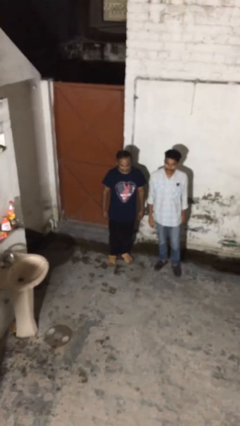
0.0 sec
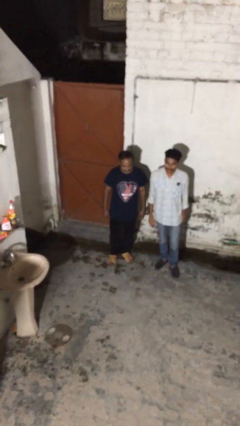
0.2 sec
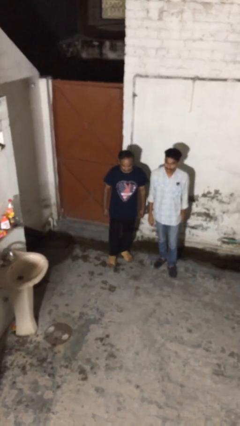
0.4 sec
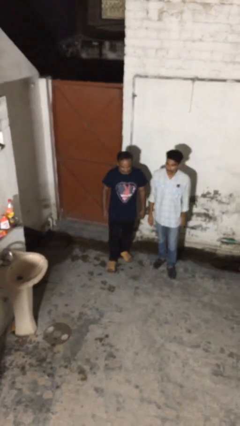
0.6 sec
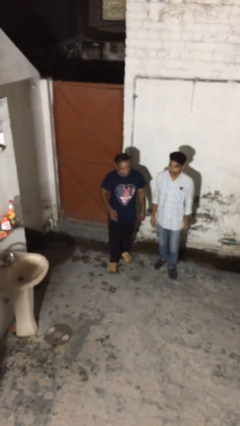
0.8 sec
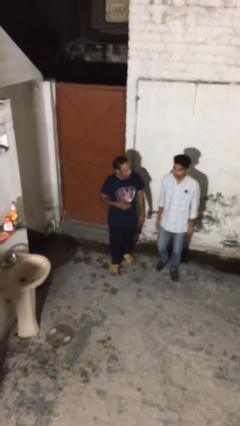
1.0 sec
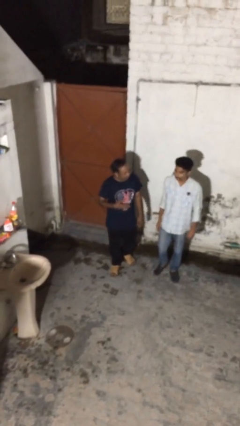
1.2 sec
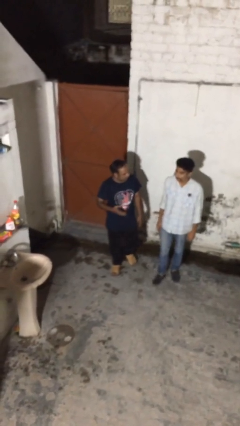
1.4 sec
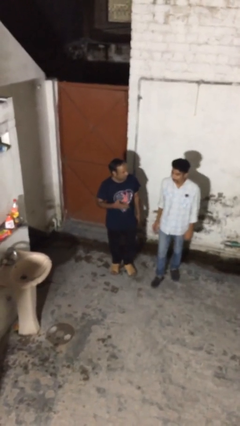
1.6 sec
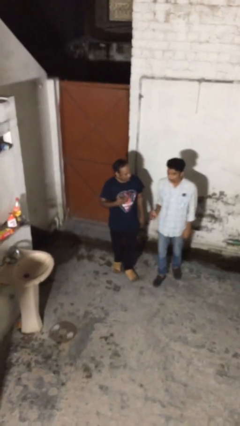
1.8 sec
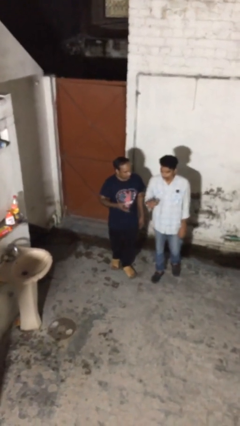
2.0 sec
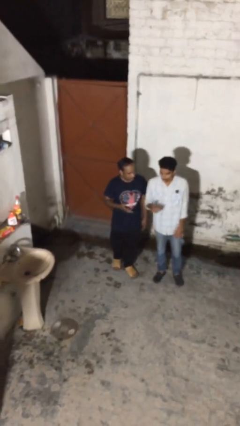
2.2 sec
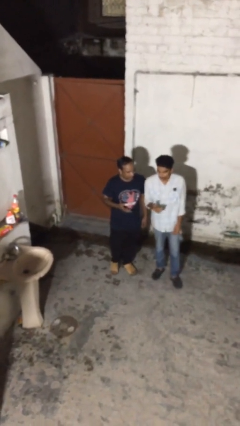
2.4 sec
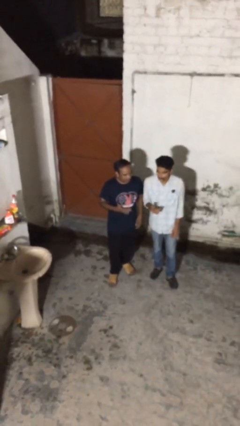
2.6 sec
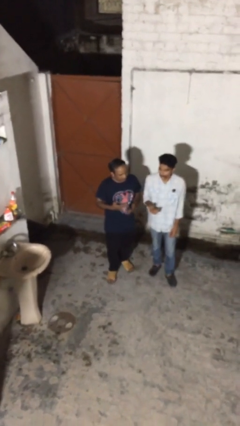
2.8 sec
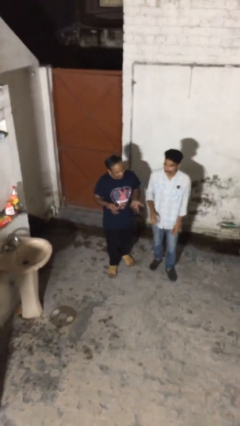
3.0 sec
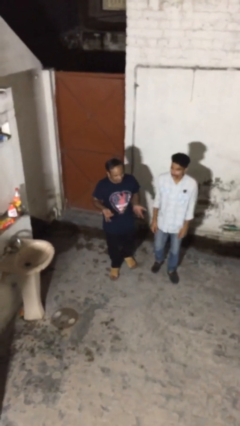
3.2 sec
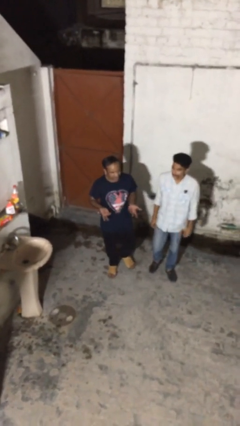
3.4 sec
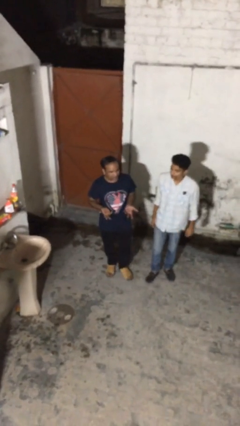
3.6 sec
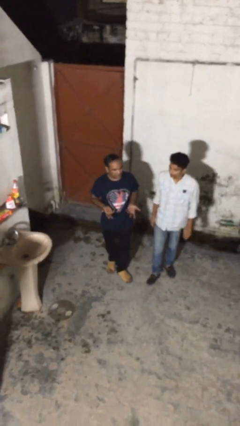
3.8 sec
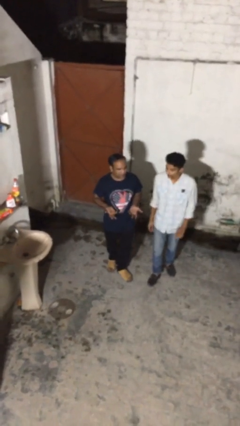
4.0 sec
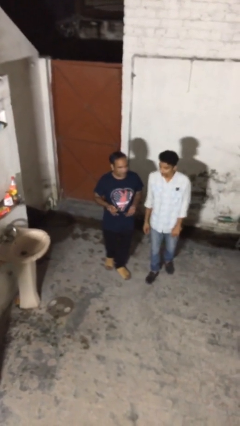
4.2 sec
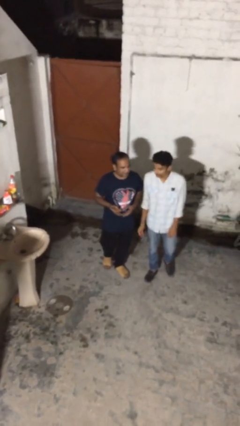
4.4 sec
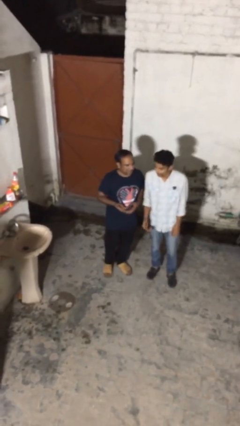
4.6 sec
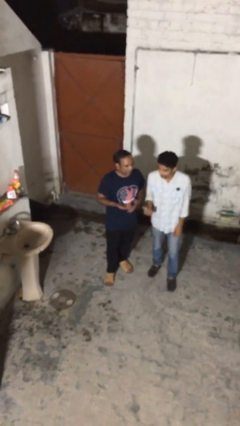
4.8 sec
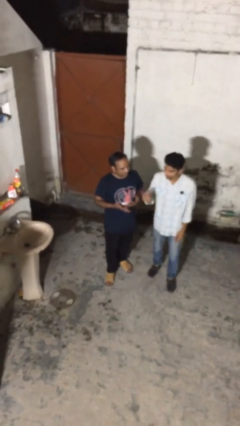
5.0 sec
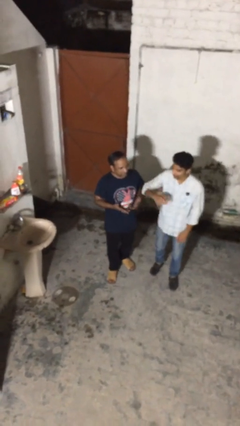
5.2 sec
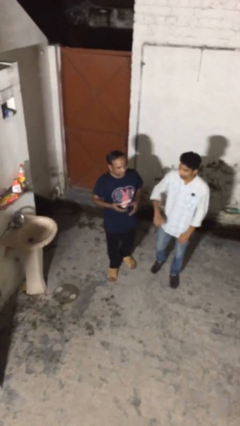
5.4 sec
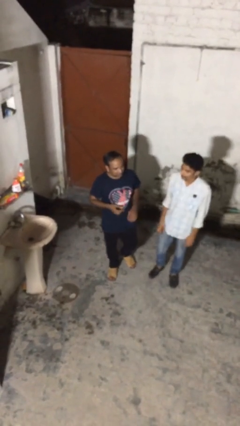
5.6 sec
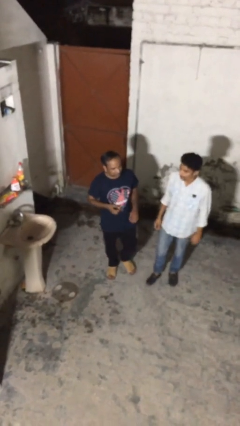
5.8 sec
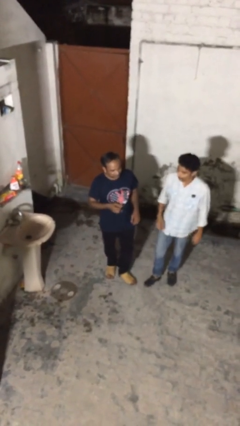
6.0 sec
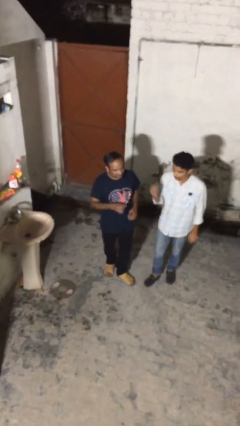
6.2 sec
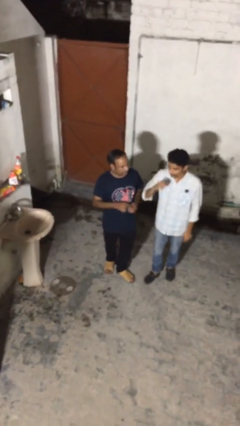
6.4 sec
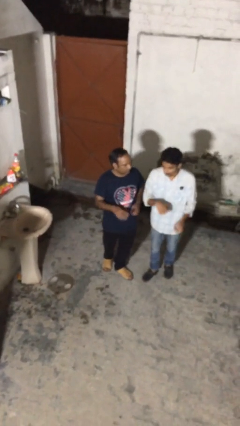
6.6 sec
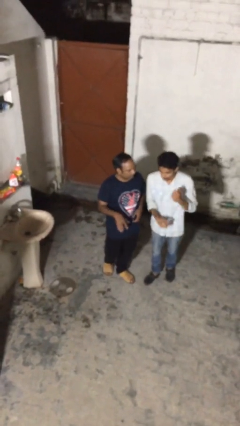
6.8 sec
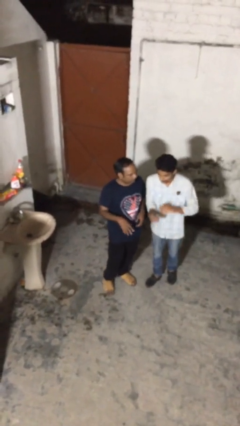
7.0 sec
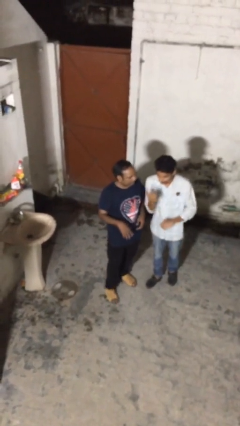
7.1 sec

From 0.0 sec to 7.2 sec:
person talks to person

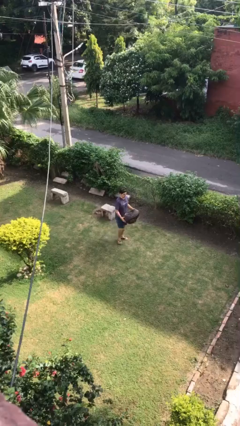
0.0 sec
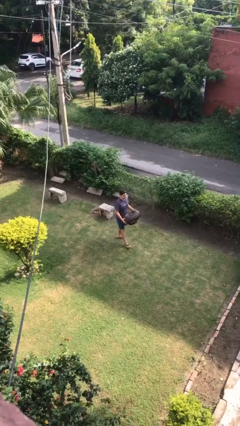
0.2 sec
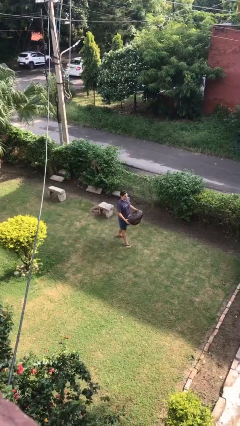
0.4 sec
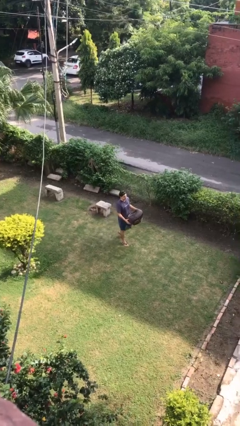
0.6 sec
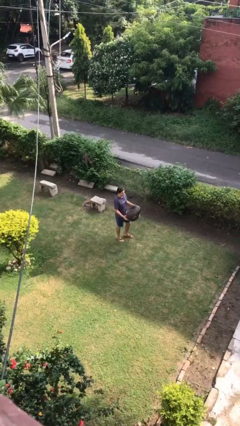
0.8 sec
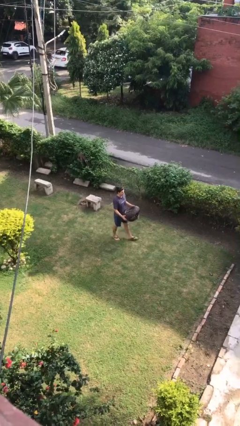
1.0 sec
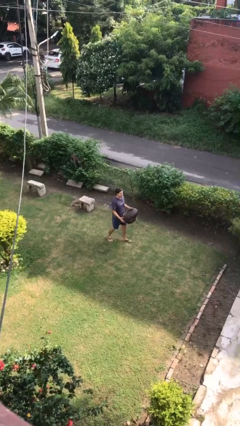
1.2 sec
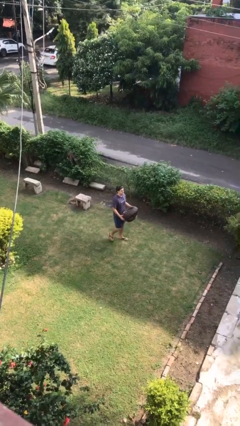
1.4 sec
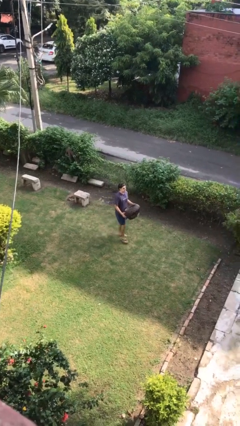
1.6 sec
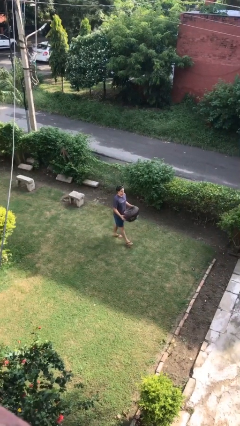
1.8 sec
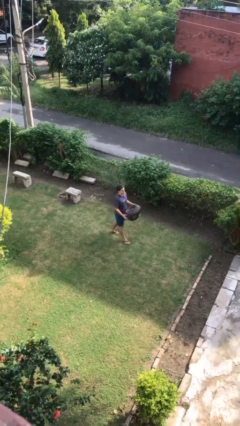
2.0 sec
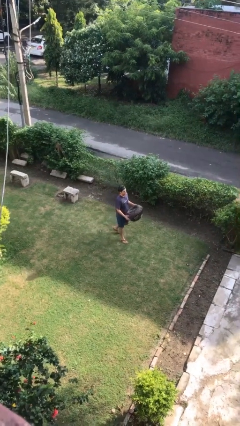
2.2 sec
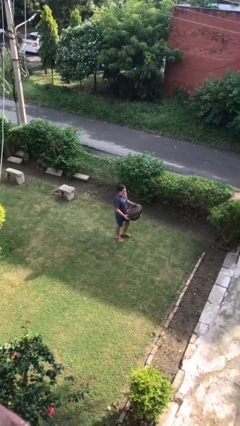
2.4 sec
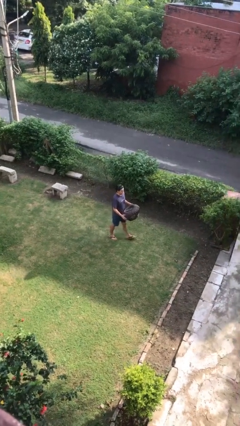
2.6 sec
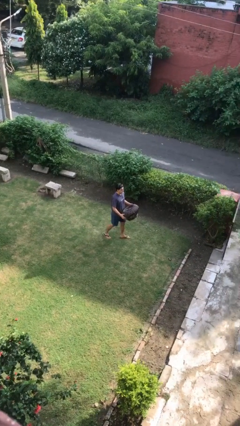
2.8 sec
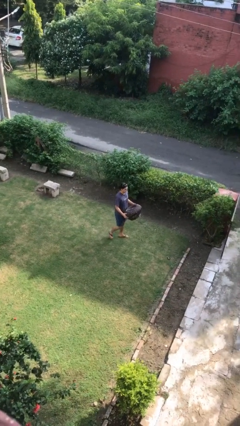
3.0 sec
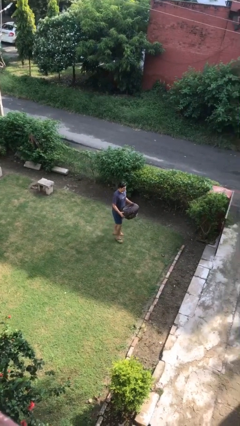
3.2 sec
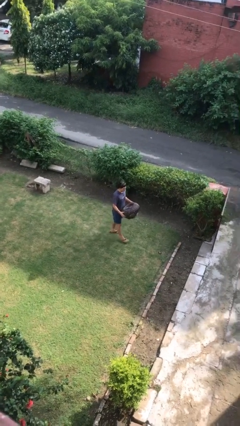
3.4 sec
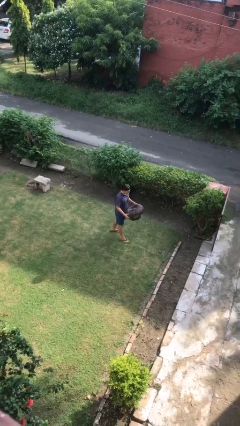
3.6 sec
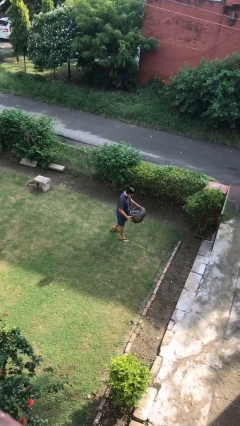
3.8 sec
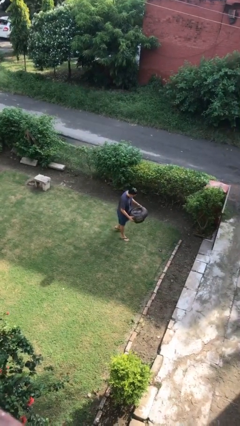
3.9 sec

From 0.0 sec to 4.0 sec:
person carries heavy object

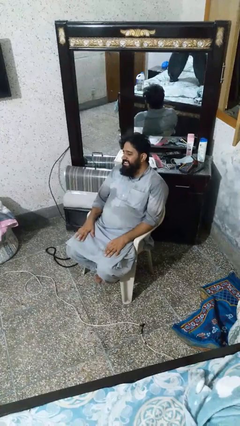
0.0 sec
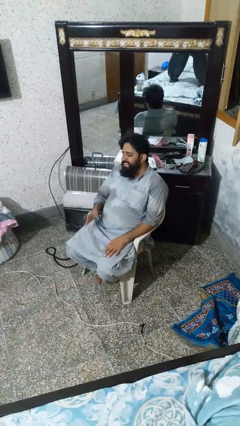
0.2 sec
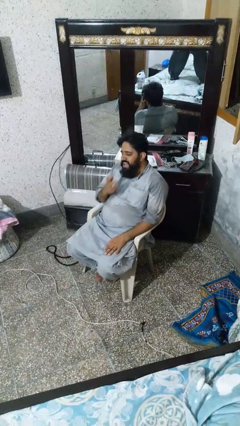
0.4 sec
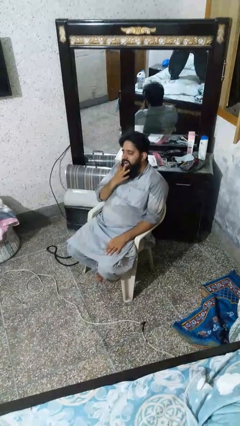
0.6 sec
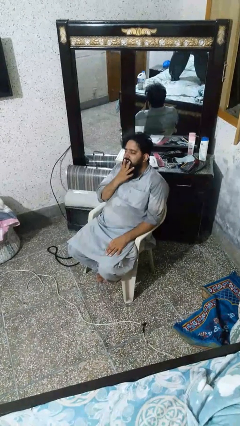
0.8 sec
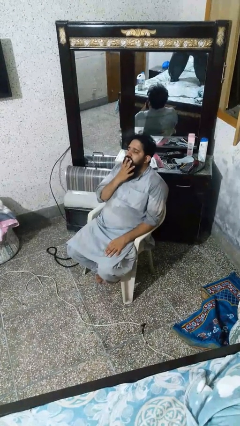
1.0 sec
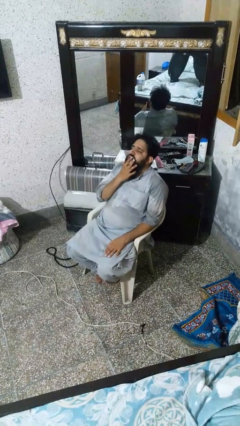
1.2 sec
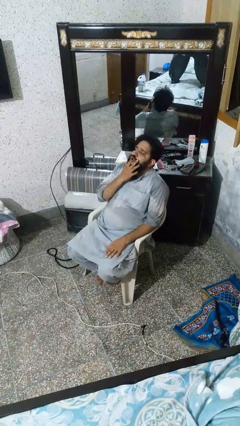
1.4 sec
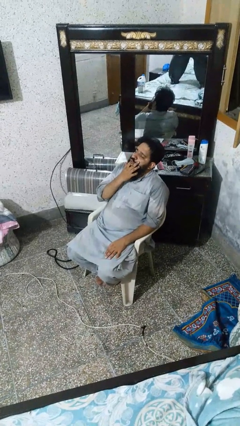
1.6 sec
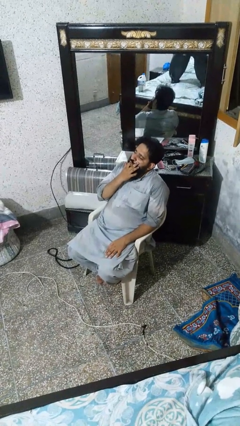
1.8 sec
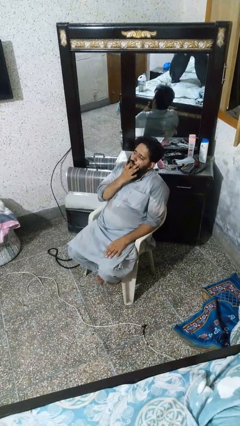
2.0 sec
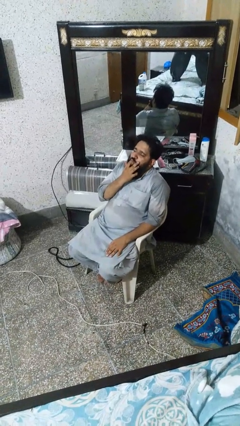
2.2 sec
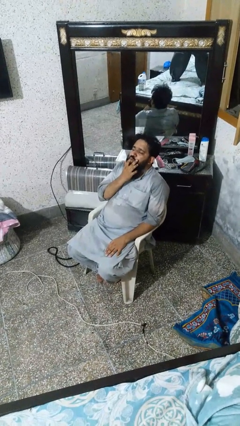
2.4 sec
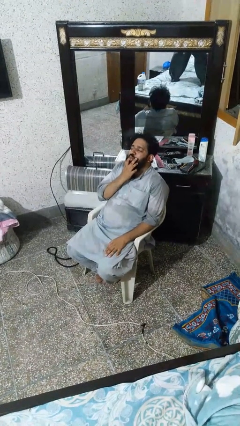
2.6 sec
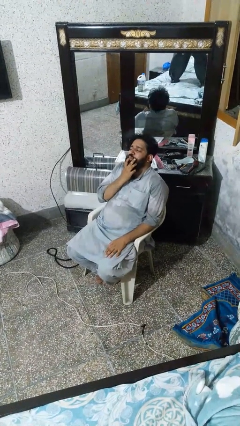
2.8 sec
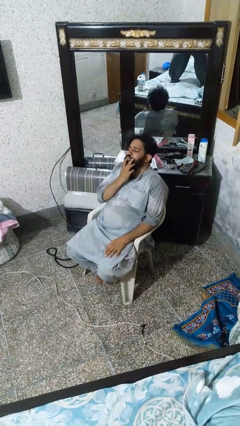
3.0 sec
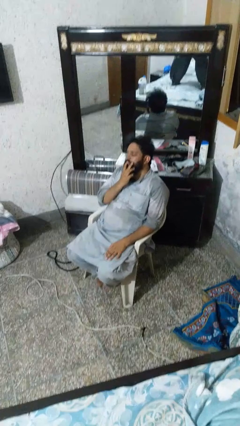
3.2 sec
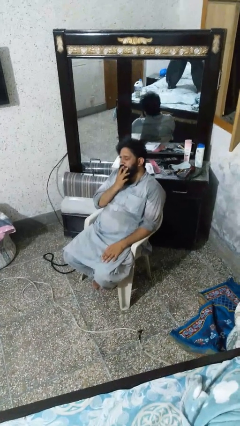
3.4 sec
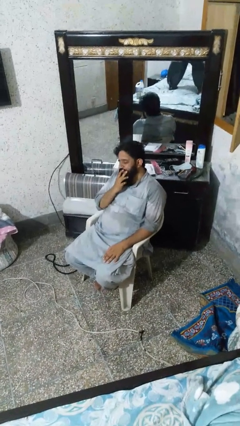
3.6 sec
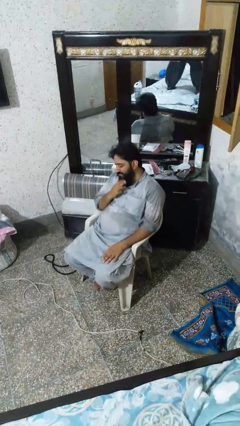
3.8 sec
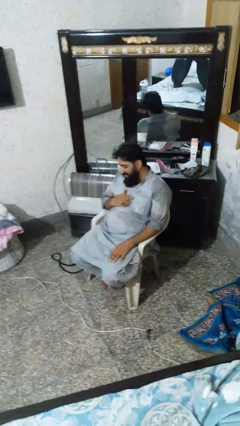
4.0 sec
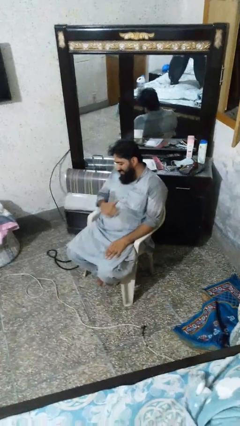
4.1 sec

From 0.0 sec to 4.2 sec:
person licks fingers

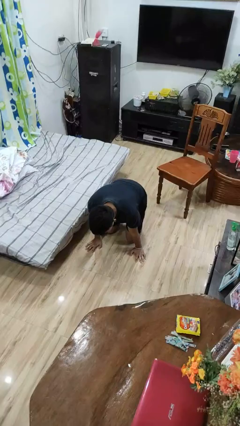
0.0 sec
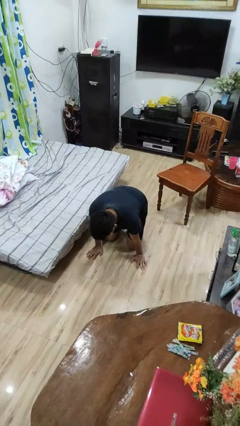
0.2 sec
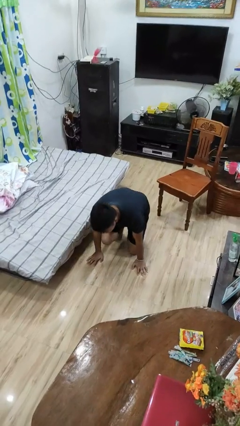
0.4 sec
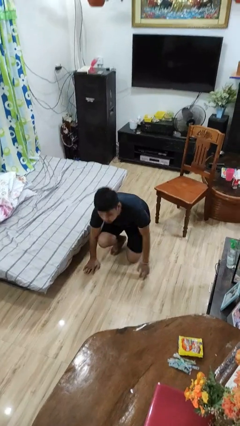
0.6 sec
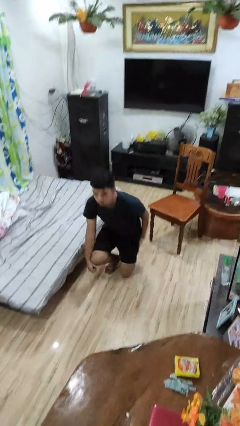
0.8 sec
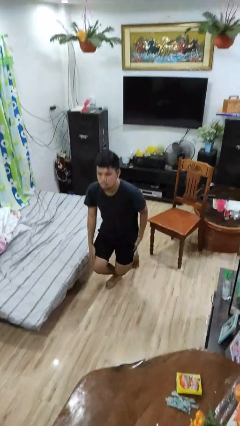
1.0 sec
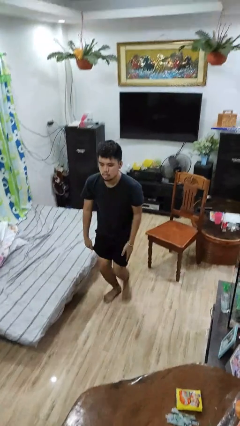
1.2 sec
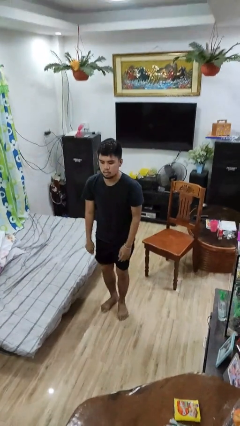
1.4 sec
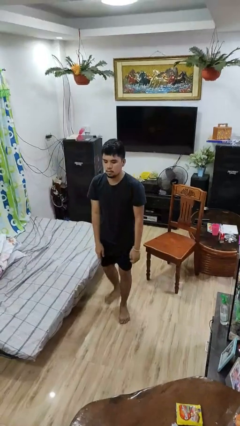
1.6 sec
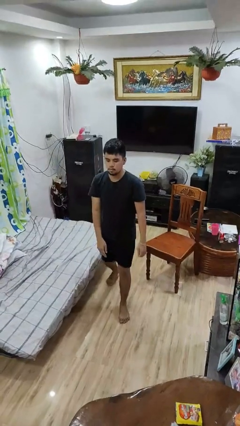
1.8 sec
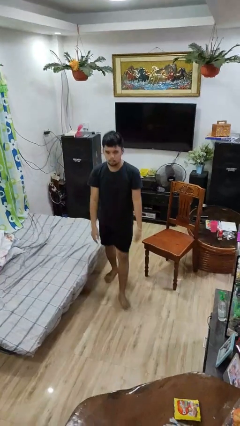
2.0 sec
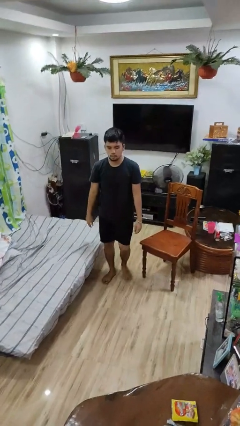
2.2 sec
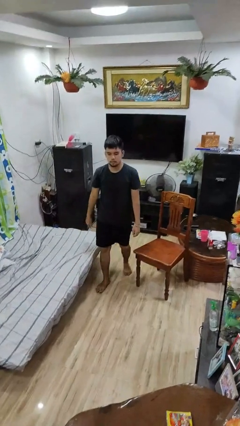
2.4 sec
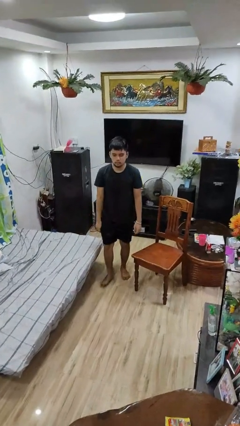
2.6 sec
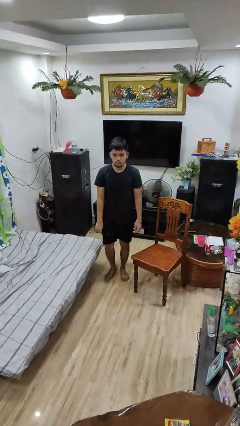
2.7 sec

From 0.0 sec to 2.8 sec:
person stands up from floor
